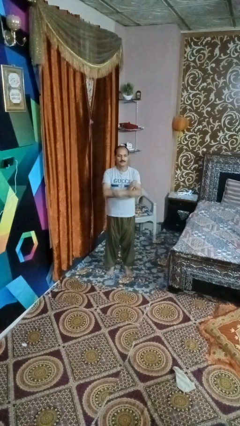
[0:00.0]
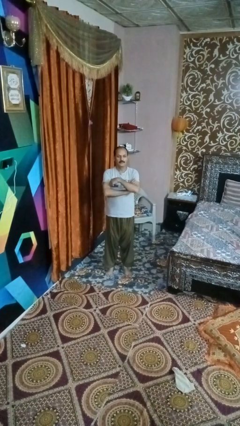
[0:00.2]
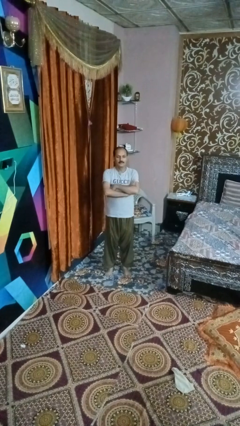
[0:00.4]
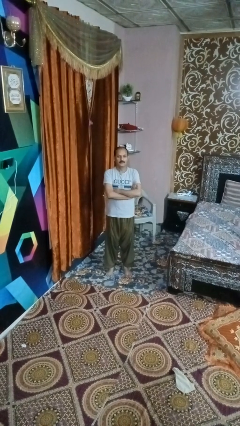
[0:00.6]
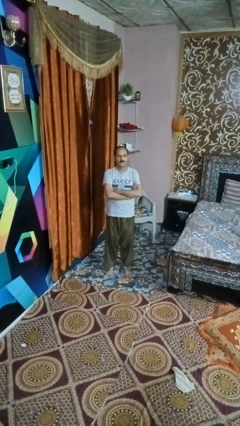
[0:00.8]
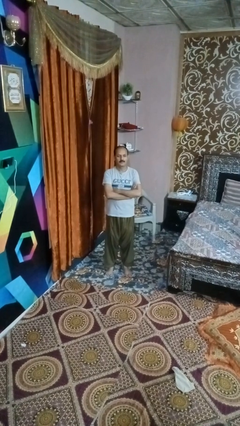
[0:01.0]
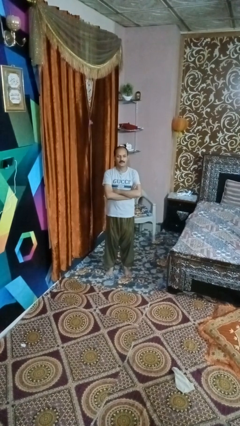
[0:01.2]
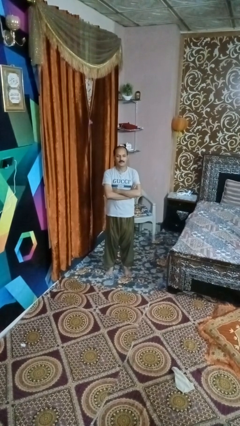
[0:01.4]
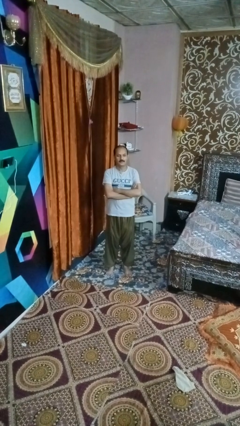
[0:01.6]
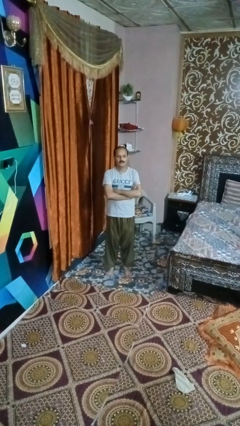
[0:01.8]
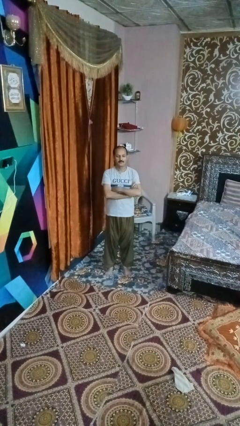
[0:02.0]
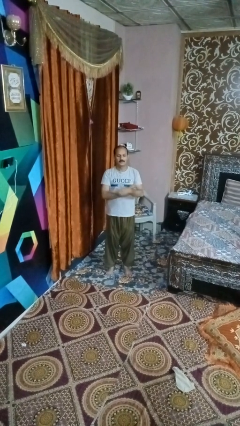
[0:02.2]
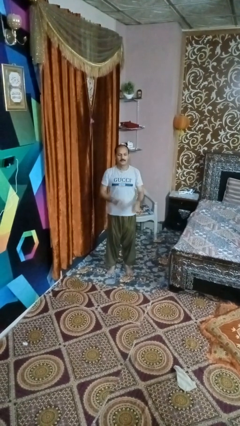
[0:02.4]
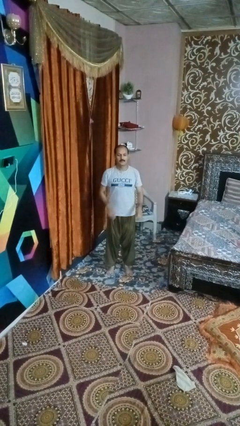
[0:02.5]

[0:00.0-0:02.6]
person crosses arms

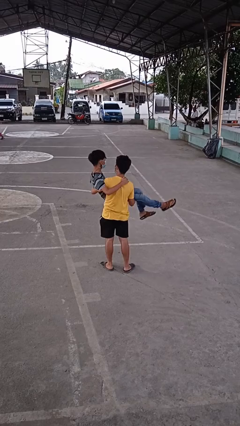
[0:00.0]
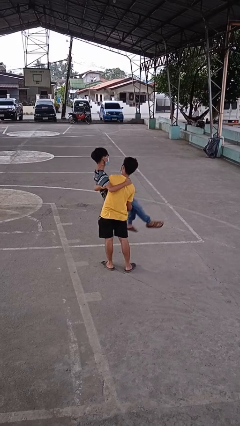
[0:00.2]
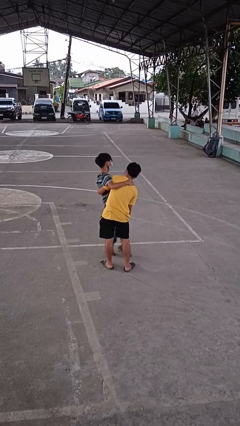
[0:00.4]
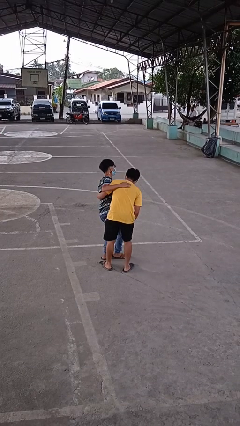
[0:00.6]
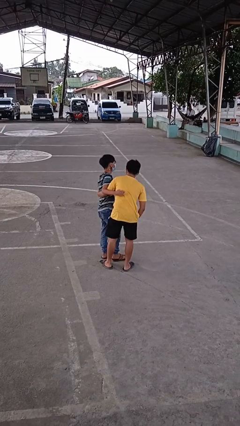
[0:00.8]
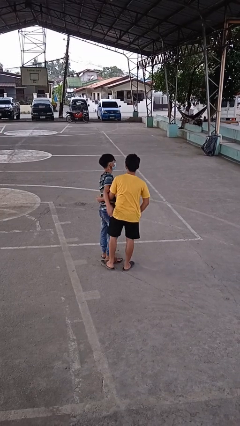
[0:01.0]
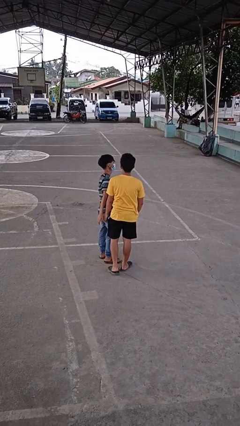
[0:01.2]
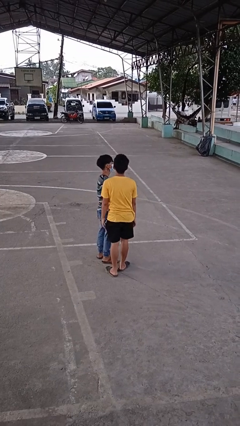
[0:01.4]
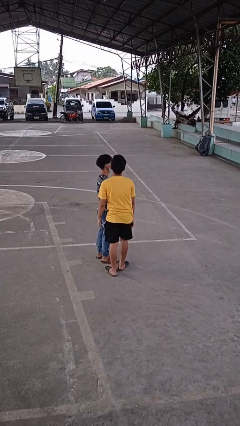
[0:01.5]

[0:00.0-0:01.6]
person puts down person

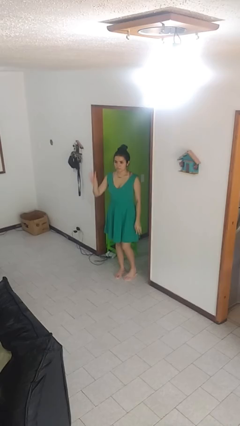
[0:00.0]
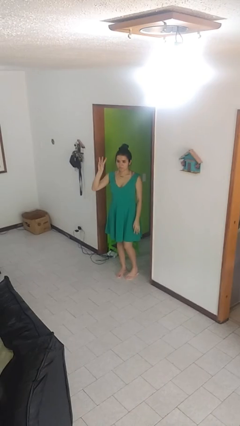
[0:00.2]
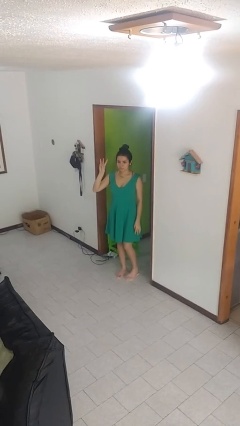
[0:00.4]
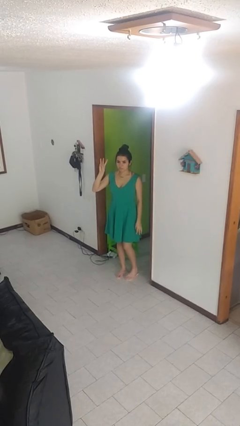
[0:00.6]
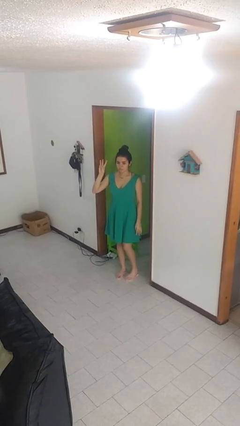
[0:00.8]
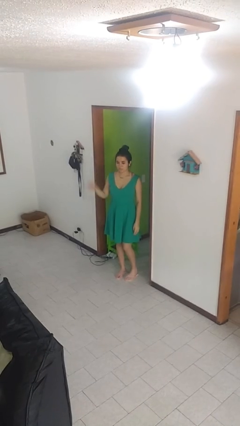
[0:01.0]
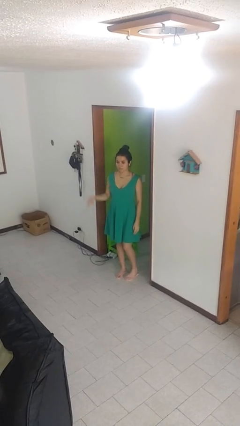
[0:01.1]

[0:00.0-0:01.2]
person gestures number three

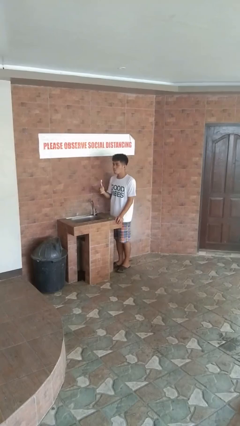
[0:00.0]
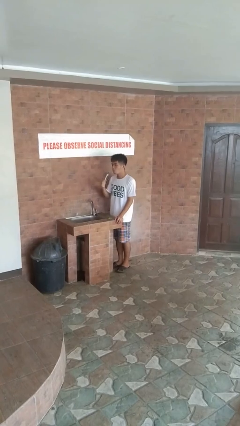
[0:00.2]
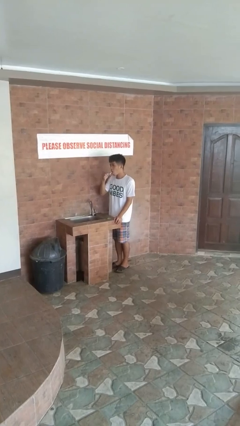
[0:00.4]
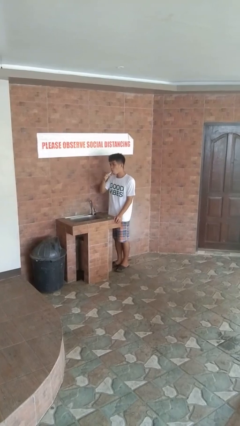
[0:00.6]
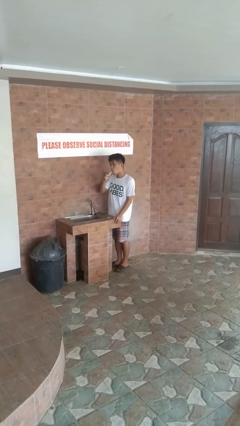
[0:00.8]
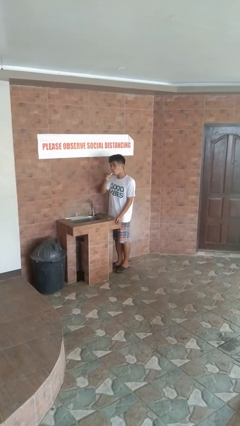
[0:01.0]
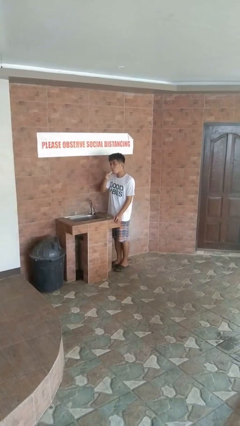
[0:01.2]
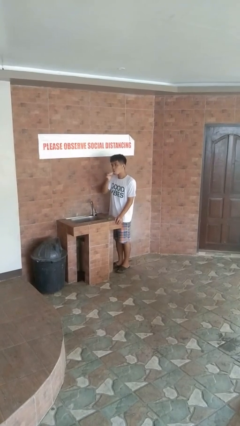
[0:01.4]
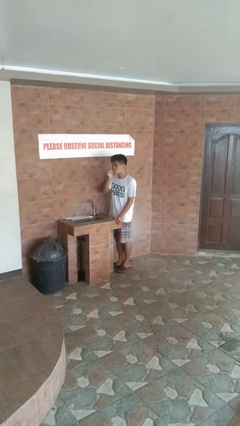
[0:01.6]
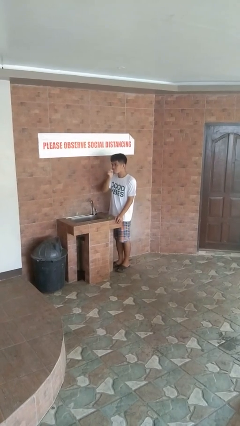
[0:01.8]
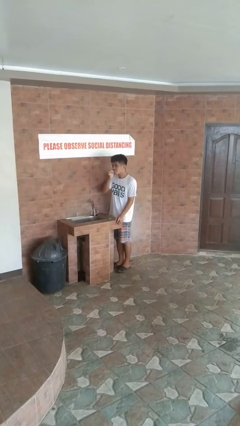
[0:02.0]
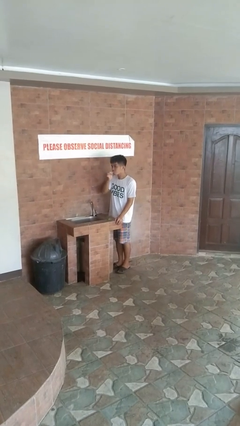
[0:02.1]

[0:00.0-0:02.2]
person brushes teeth

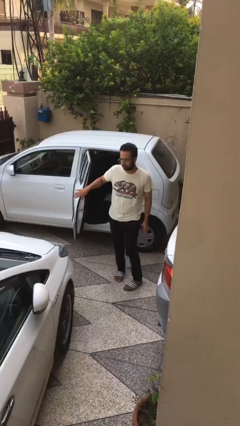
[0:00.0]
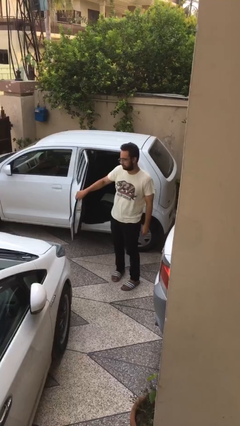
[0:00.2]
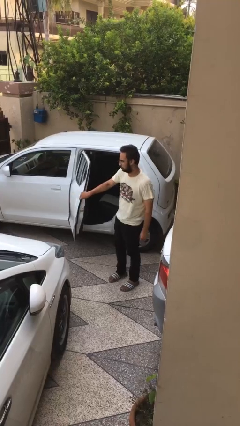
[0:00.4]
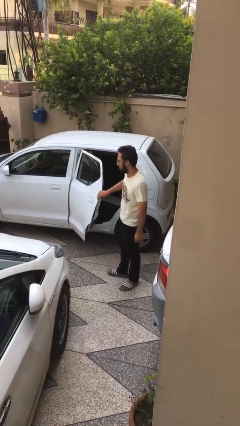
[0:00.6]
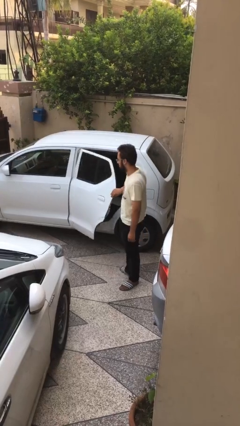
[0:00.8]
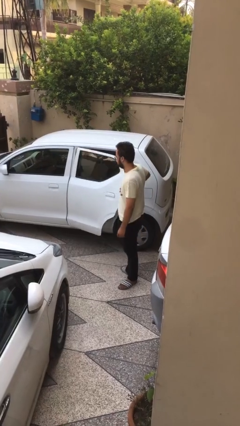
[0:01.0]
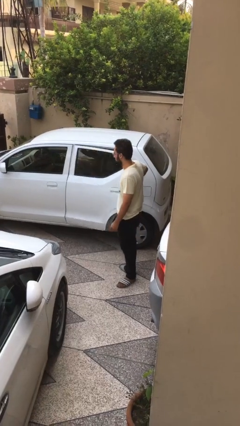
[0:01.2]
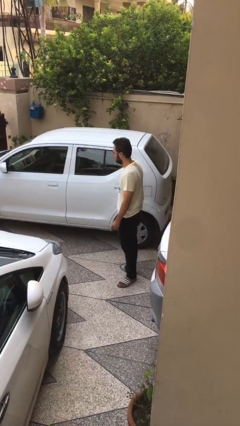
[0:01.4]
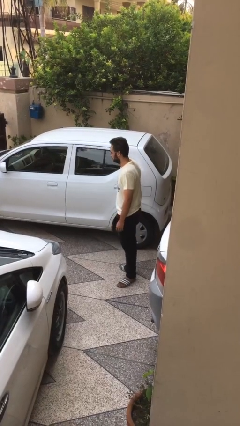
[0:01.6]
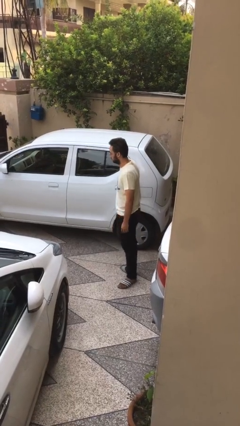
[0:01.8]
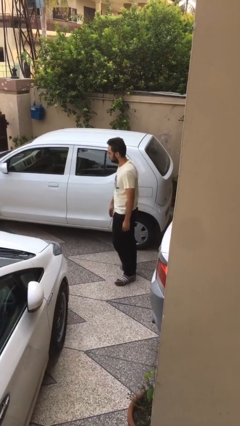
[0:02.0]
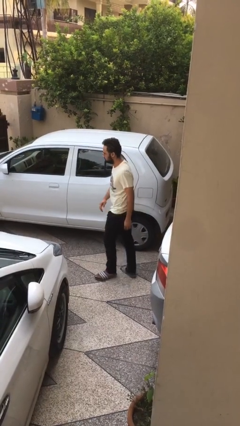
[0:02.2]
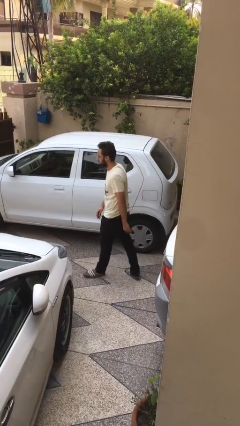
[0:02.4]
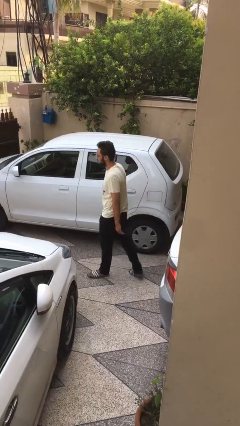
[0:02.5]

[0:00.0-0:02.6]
person closes car door

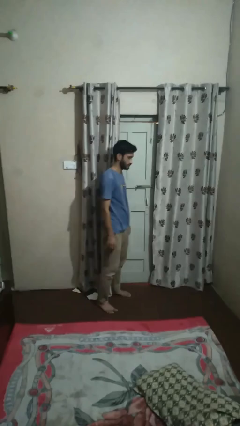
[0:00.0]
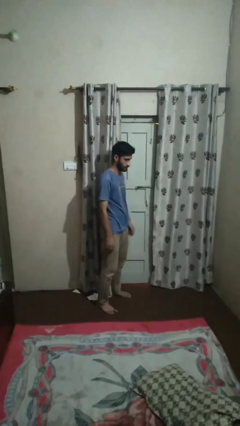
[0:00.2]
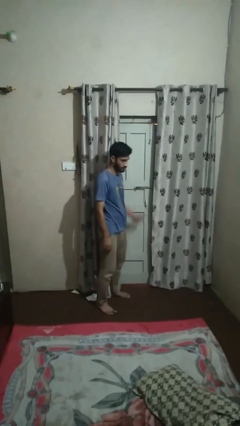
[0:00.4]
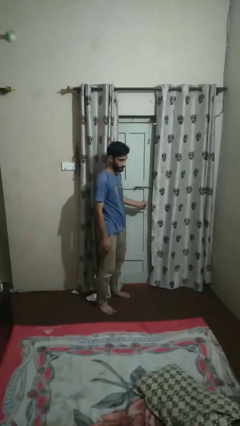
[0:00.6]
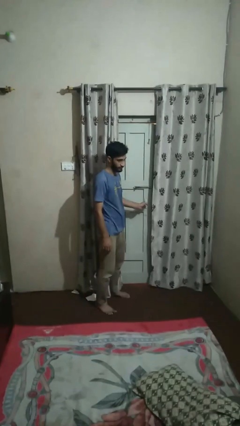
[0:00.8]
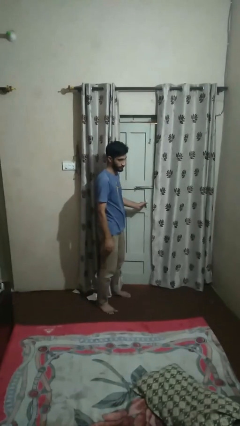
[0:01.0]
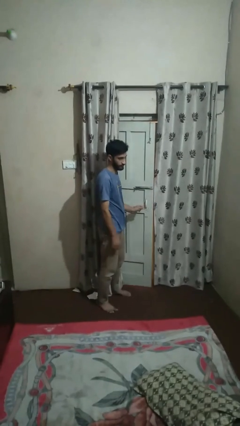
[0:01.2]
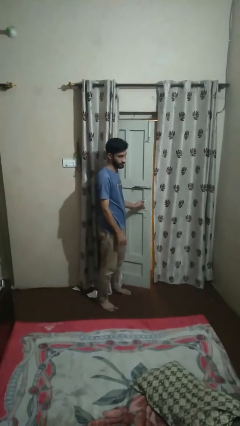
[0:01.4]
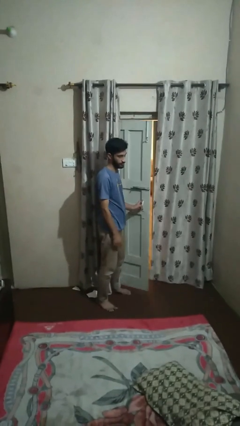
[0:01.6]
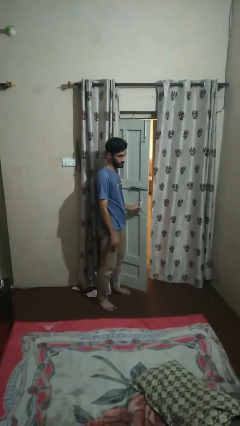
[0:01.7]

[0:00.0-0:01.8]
person opens facility door

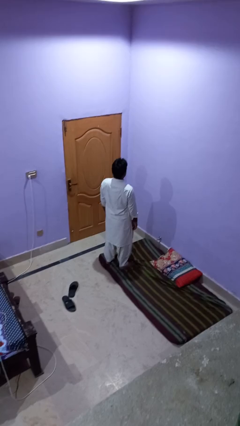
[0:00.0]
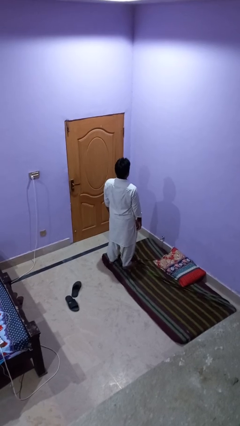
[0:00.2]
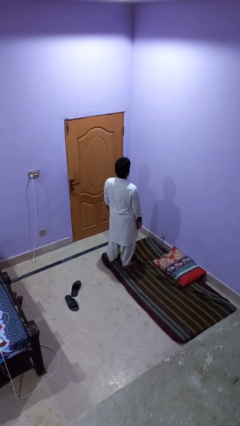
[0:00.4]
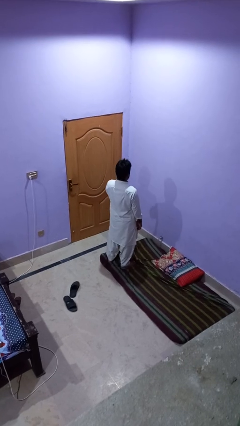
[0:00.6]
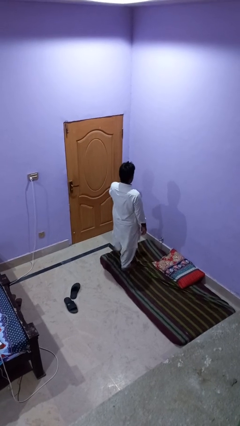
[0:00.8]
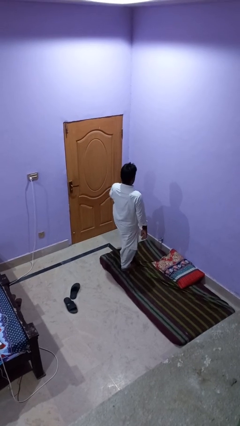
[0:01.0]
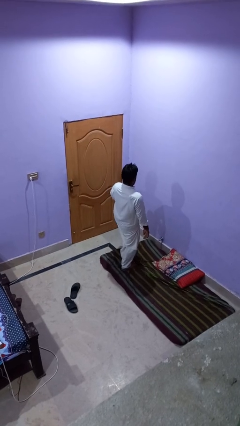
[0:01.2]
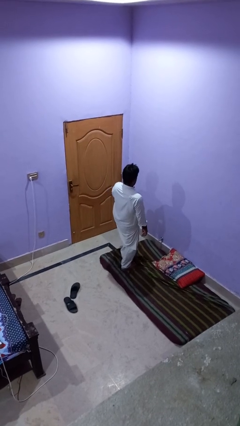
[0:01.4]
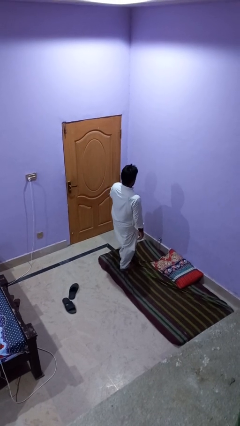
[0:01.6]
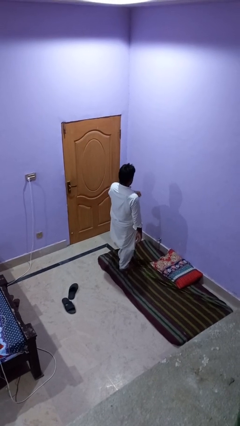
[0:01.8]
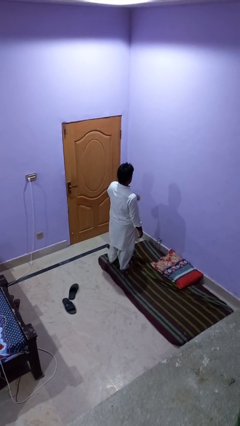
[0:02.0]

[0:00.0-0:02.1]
person slaps hands on thighs

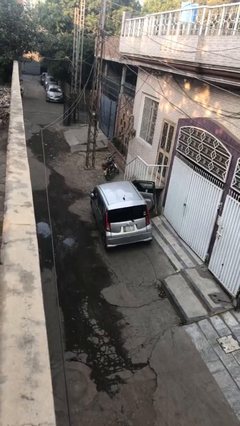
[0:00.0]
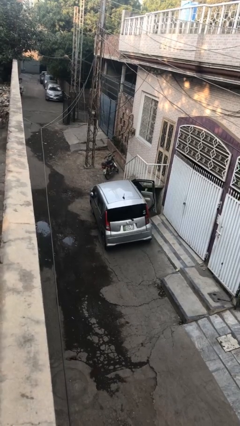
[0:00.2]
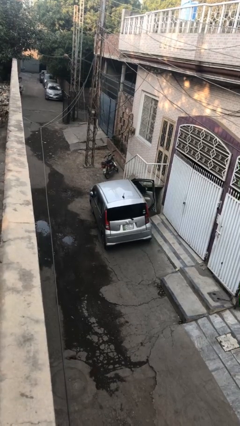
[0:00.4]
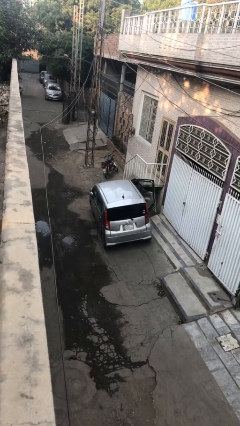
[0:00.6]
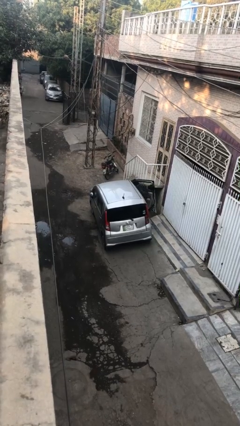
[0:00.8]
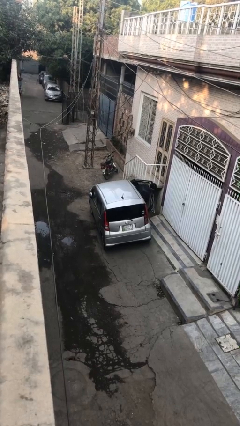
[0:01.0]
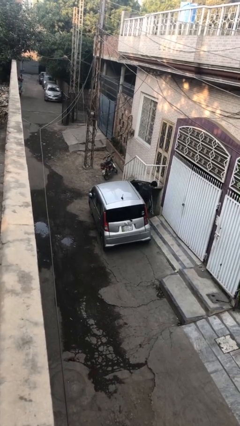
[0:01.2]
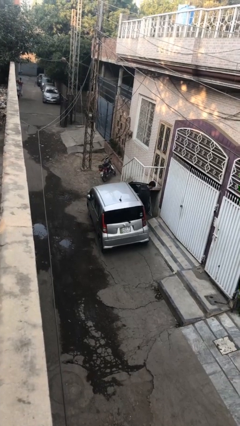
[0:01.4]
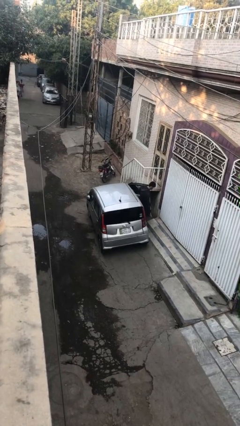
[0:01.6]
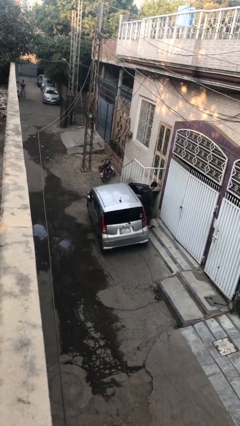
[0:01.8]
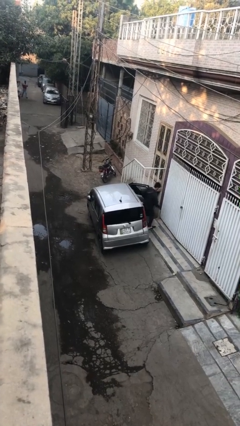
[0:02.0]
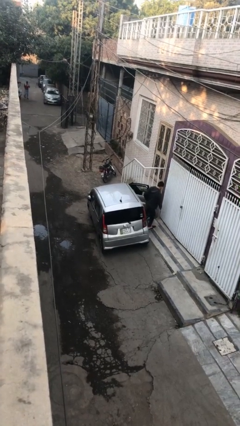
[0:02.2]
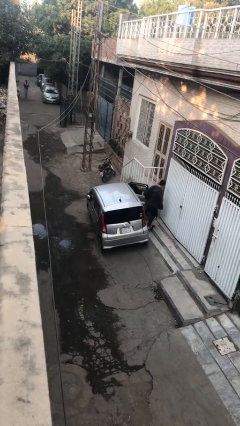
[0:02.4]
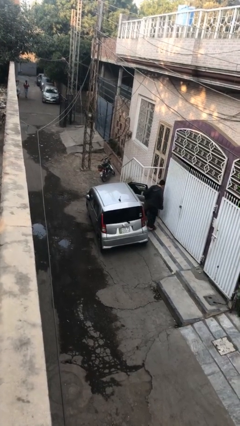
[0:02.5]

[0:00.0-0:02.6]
car drops off person
